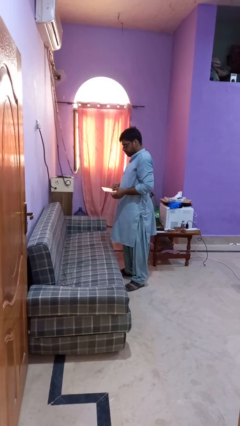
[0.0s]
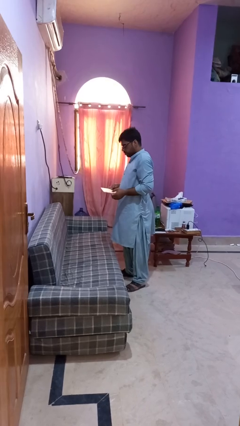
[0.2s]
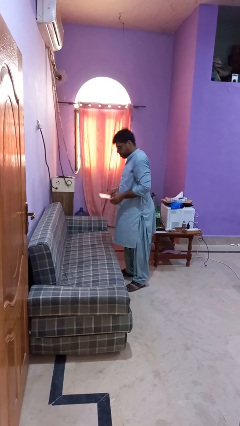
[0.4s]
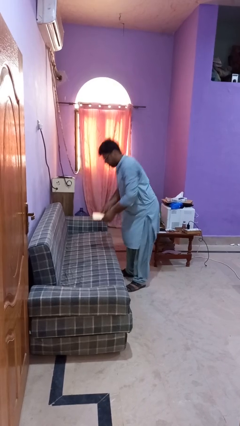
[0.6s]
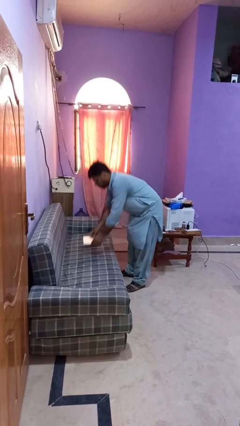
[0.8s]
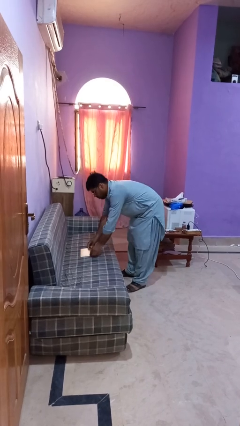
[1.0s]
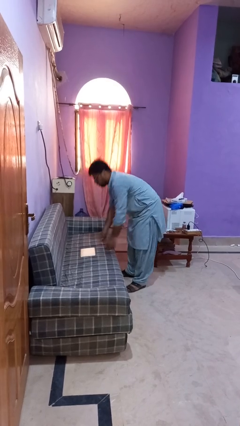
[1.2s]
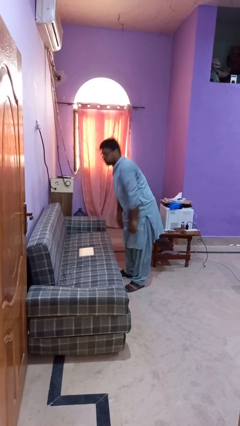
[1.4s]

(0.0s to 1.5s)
person puts down object on couch

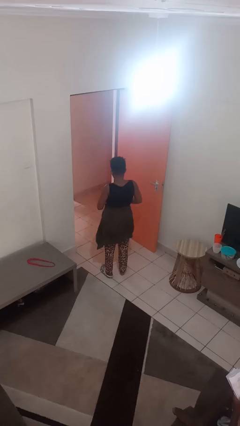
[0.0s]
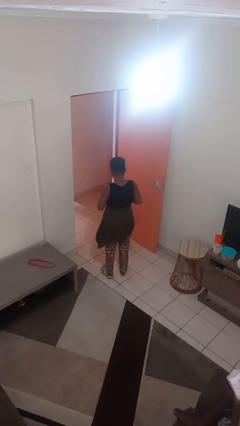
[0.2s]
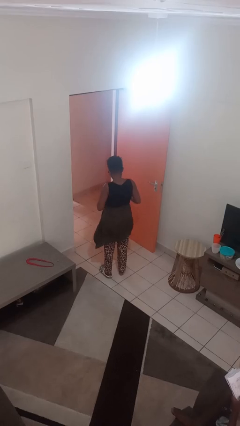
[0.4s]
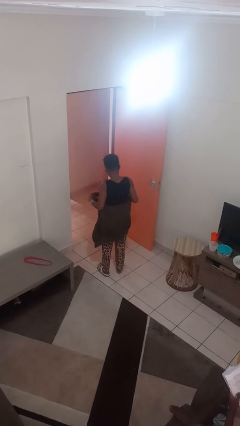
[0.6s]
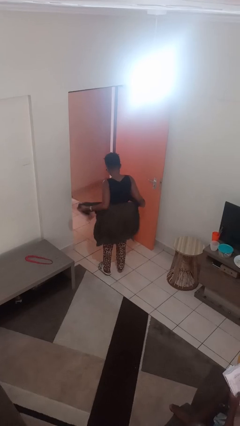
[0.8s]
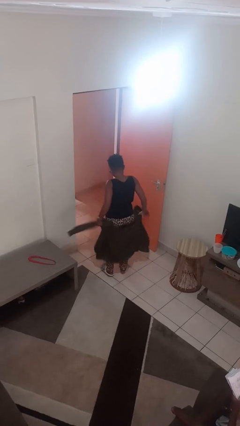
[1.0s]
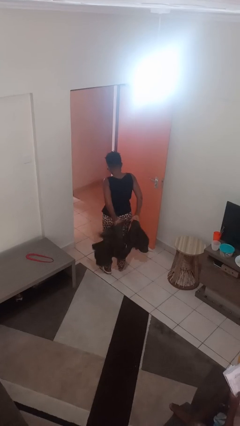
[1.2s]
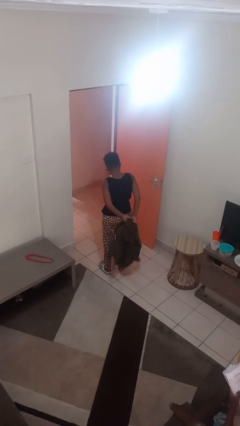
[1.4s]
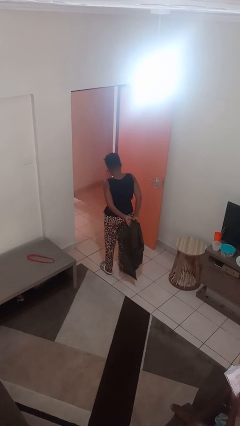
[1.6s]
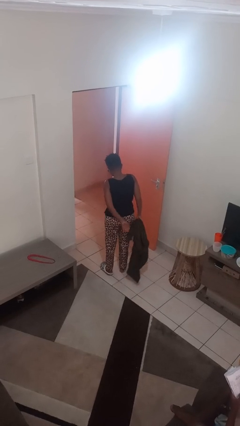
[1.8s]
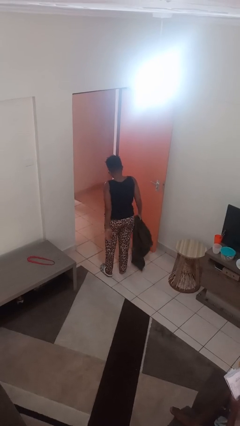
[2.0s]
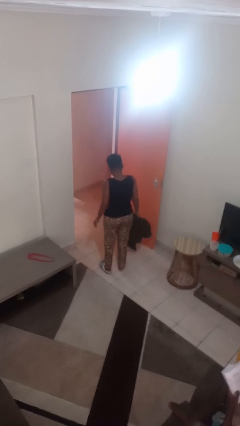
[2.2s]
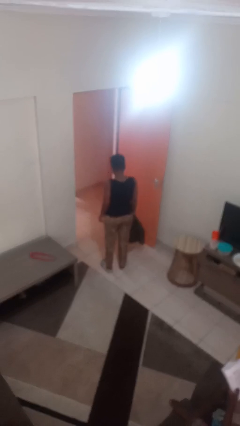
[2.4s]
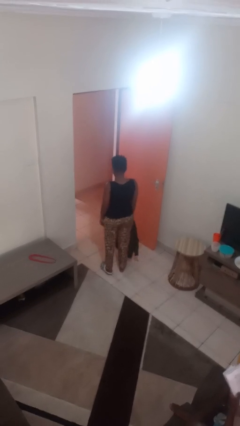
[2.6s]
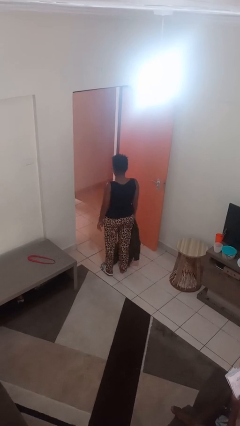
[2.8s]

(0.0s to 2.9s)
person unties jacket around waist

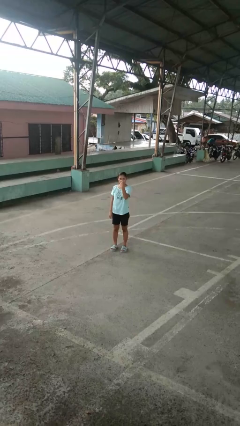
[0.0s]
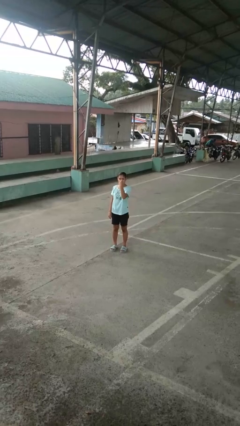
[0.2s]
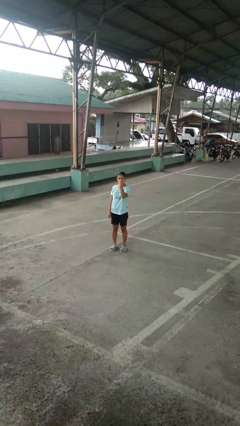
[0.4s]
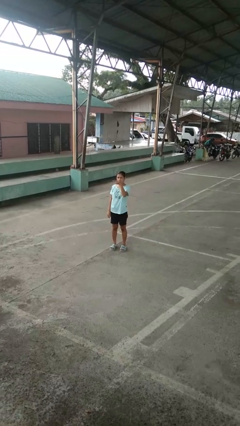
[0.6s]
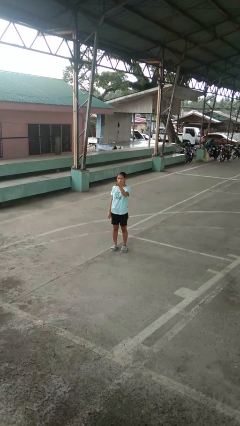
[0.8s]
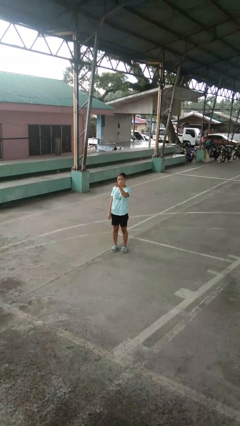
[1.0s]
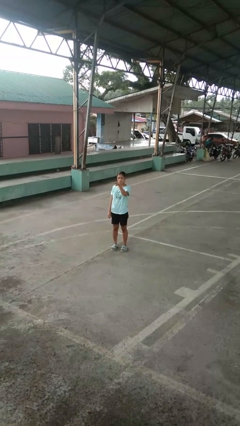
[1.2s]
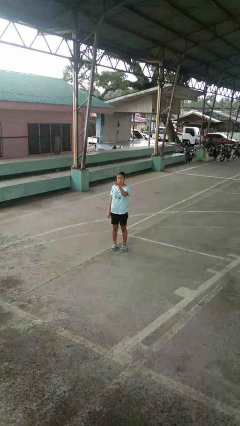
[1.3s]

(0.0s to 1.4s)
person gestures watch closely

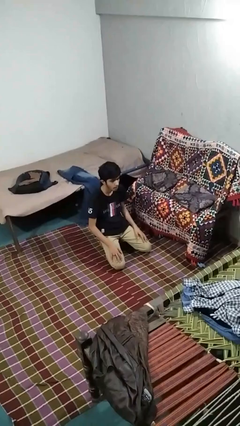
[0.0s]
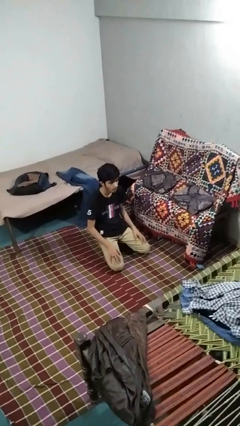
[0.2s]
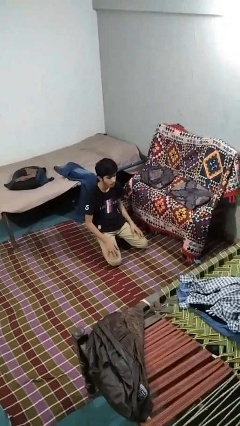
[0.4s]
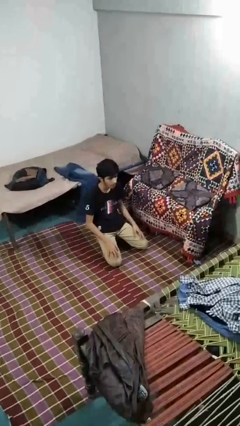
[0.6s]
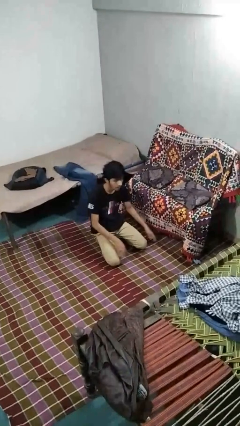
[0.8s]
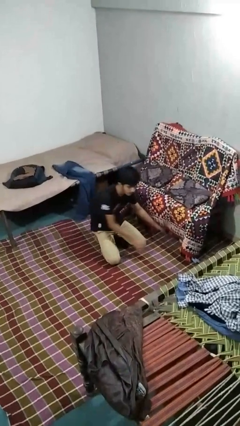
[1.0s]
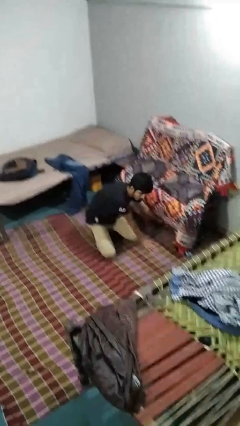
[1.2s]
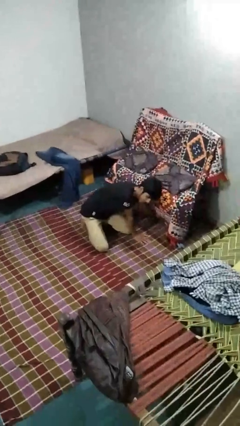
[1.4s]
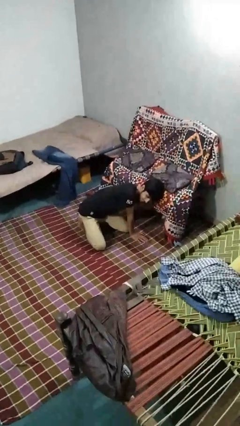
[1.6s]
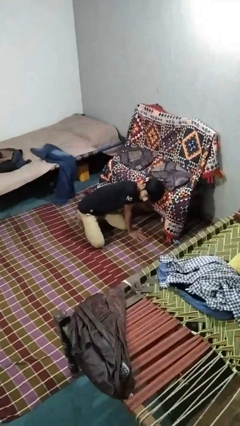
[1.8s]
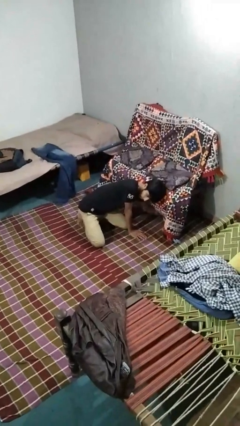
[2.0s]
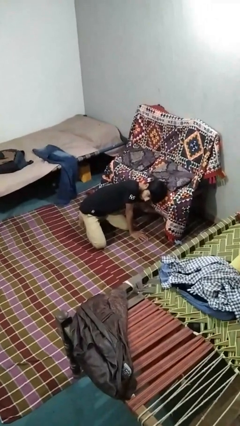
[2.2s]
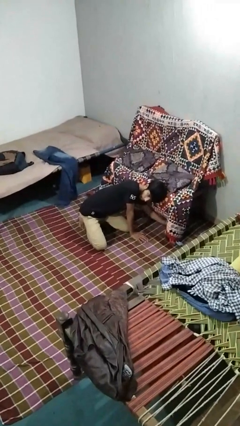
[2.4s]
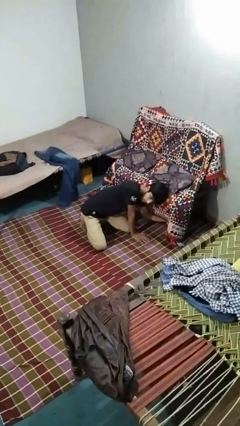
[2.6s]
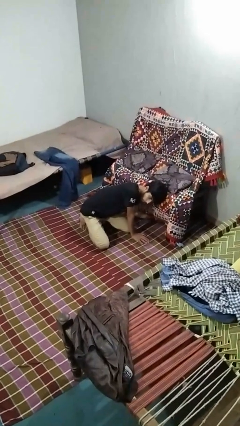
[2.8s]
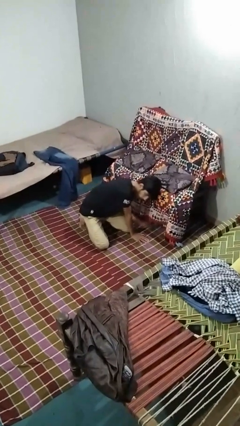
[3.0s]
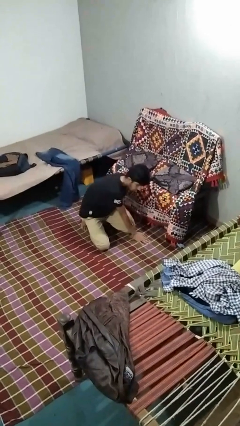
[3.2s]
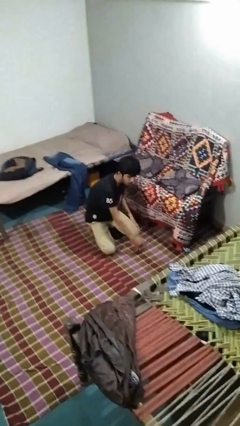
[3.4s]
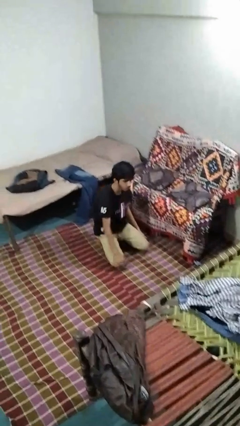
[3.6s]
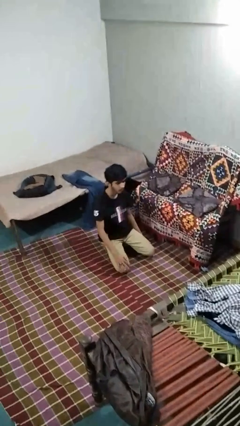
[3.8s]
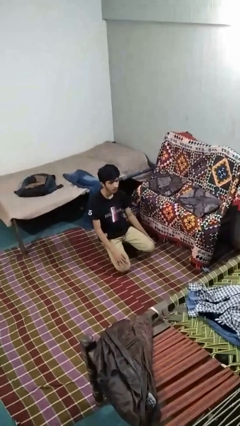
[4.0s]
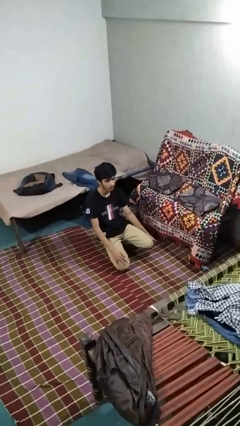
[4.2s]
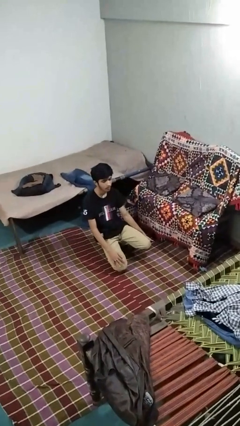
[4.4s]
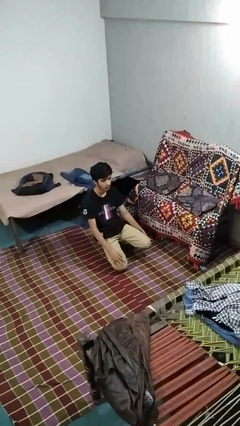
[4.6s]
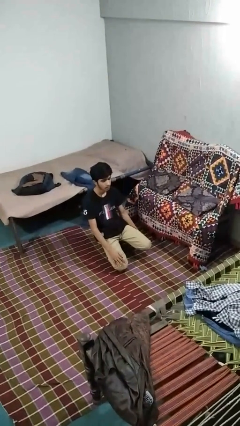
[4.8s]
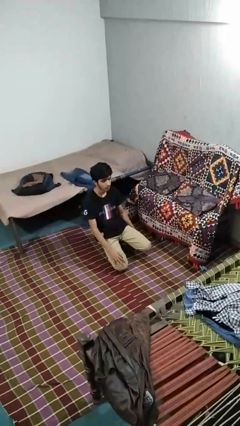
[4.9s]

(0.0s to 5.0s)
person searches under couch

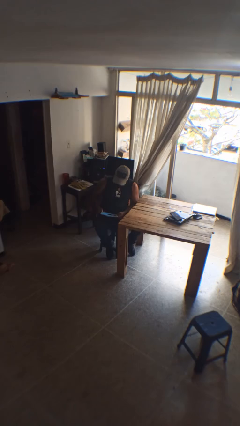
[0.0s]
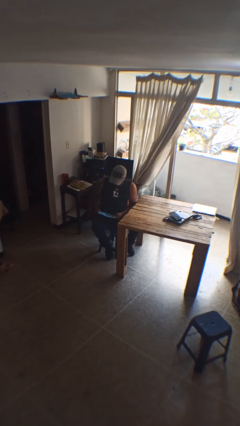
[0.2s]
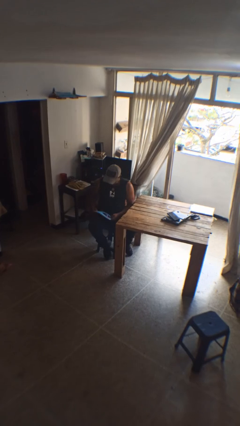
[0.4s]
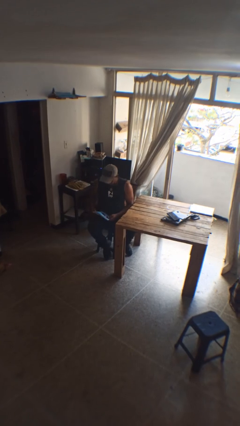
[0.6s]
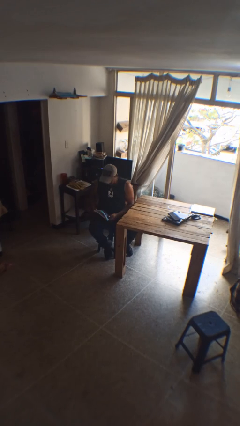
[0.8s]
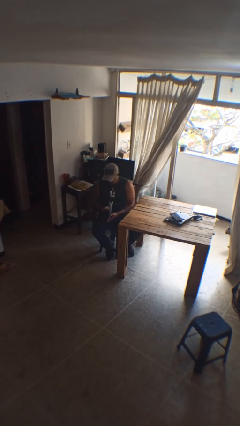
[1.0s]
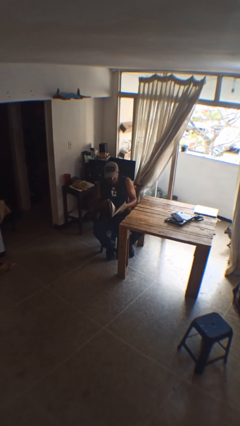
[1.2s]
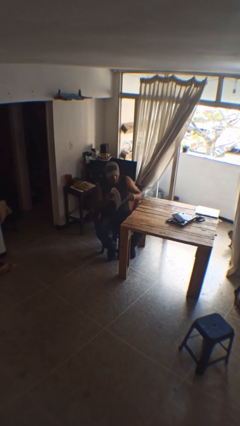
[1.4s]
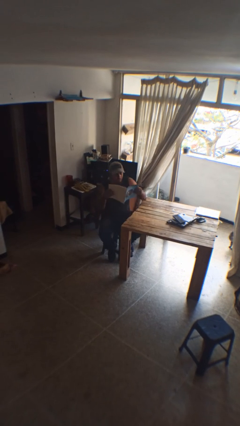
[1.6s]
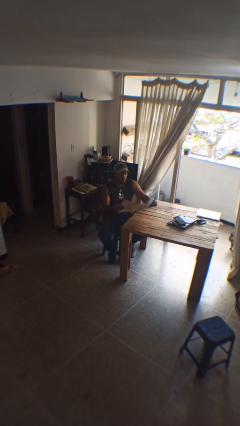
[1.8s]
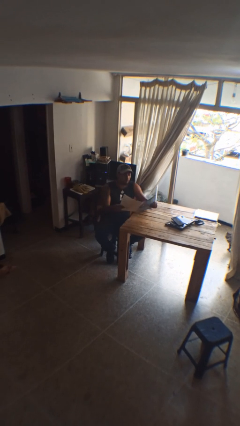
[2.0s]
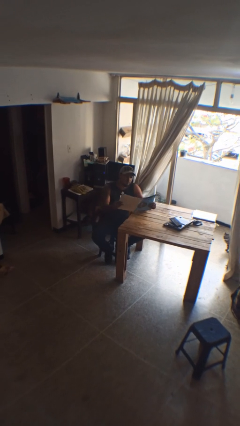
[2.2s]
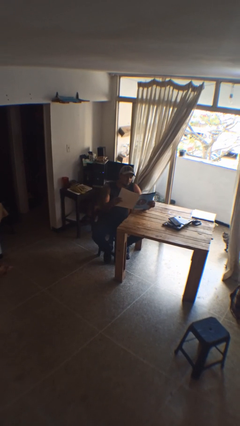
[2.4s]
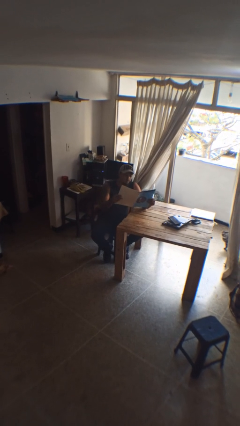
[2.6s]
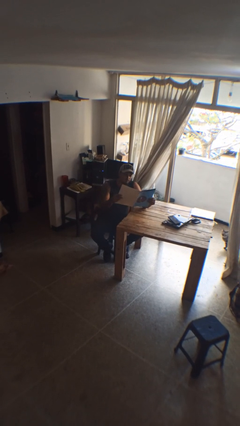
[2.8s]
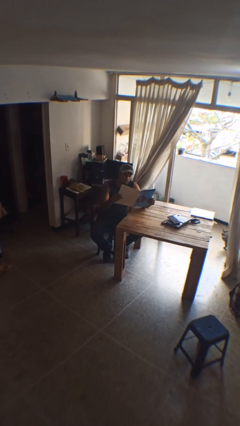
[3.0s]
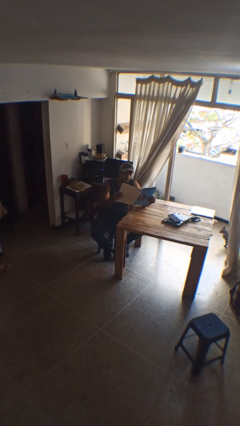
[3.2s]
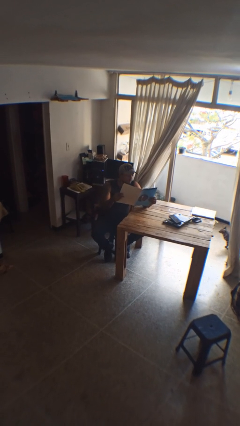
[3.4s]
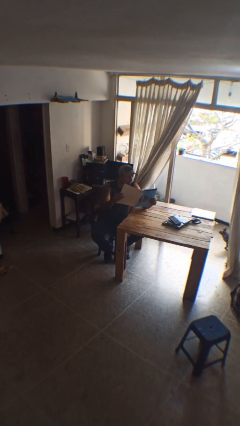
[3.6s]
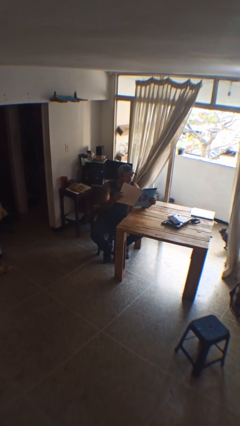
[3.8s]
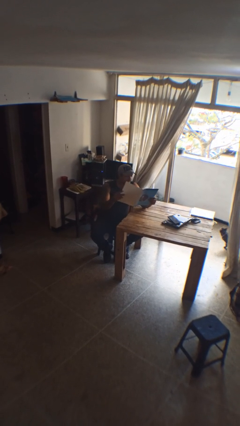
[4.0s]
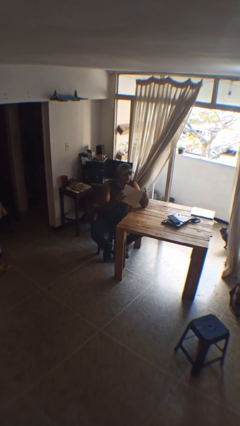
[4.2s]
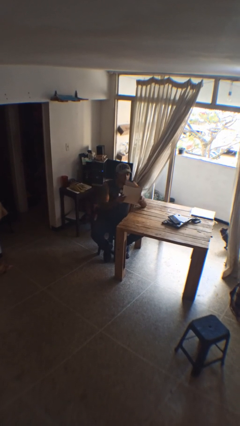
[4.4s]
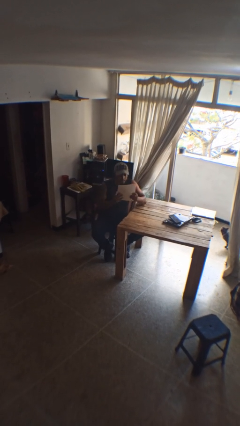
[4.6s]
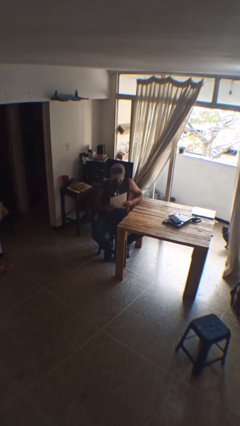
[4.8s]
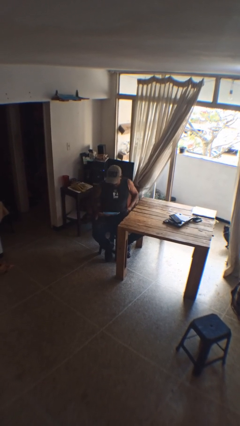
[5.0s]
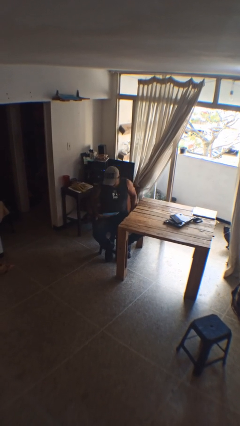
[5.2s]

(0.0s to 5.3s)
person reads document

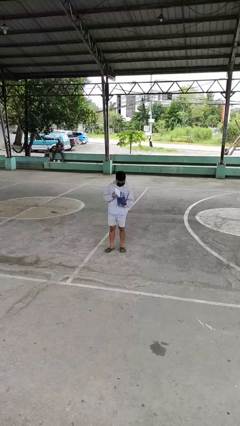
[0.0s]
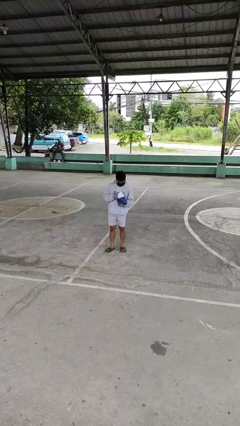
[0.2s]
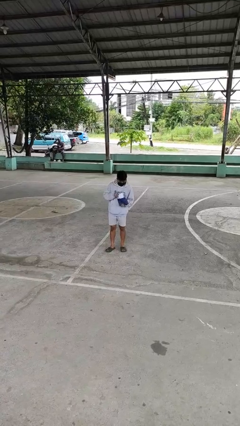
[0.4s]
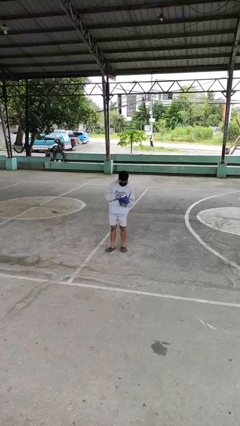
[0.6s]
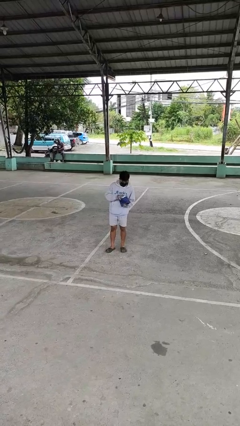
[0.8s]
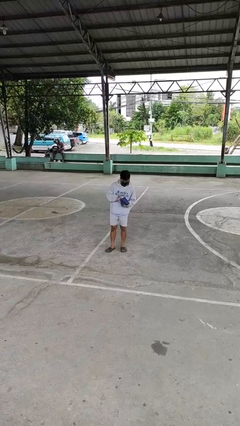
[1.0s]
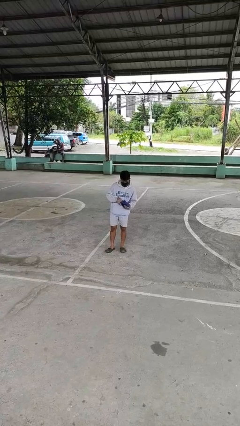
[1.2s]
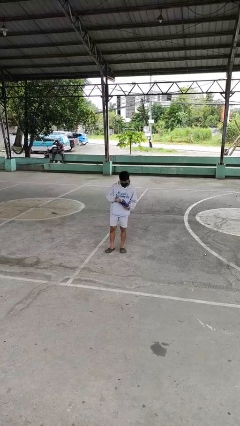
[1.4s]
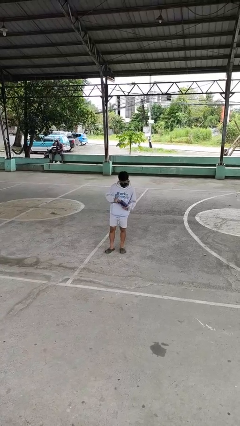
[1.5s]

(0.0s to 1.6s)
person puts object into purse
